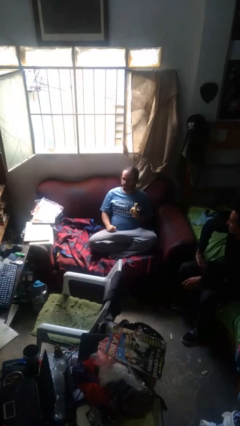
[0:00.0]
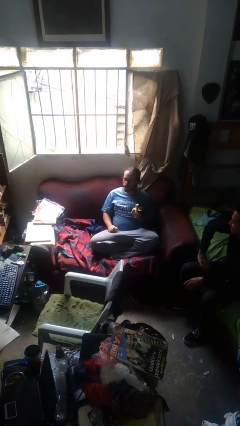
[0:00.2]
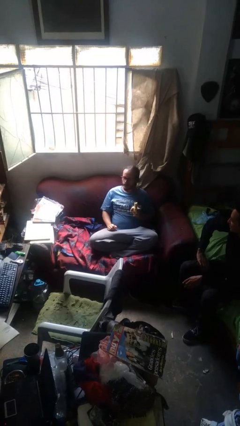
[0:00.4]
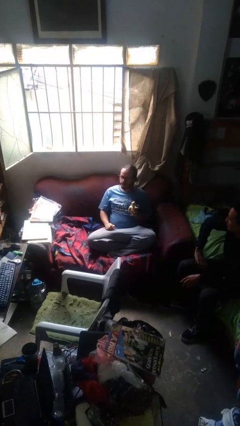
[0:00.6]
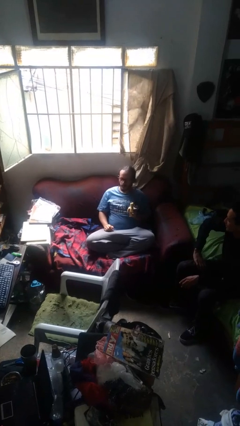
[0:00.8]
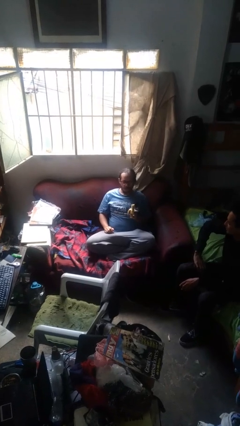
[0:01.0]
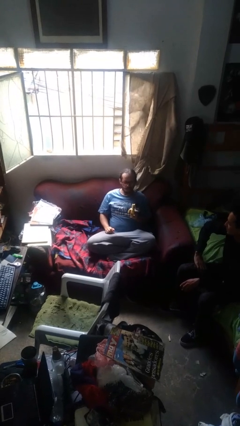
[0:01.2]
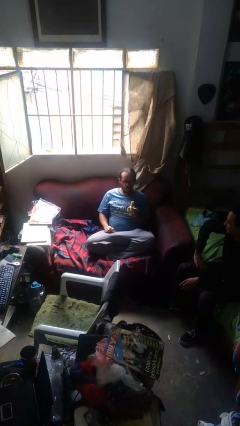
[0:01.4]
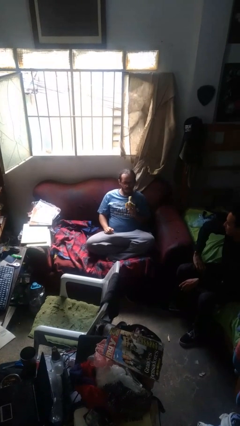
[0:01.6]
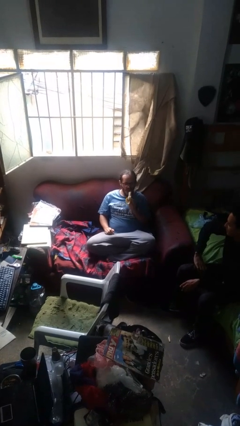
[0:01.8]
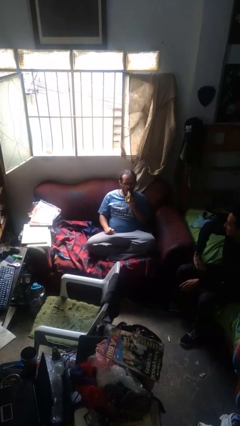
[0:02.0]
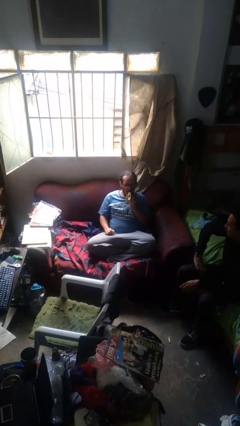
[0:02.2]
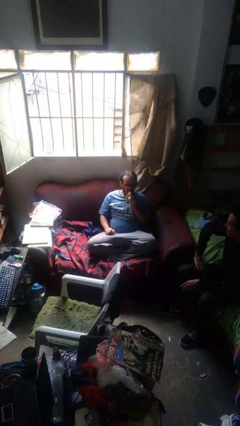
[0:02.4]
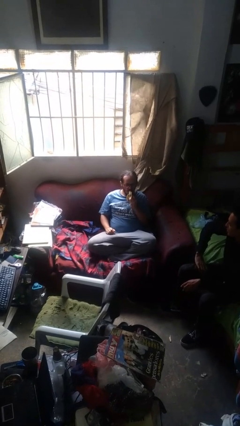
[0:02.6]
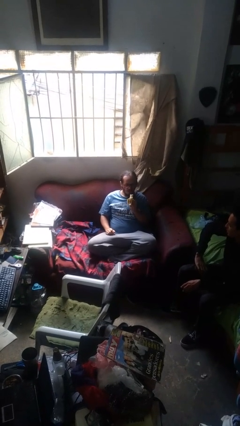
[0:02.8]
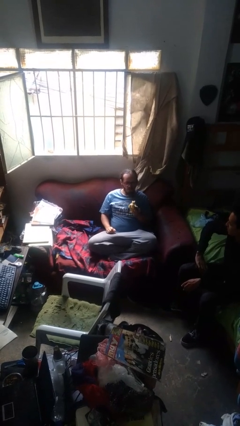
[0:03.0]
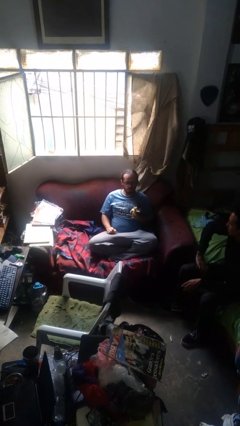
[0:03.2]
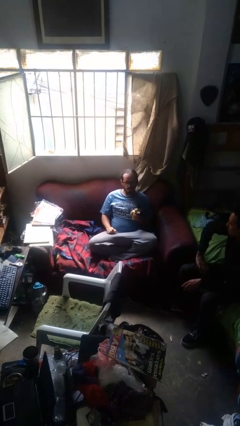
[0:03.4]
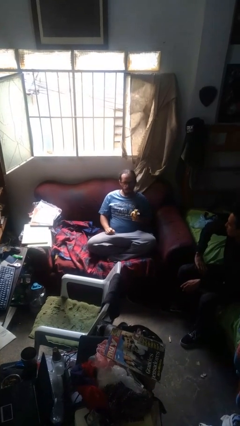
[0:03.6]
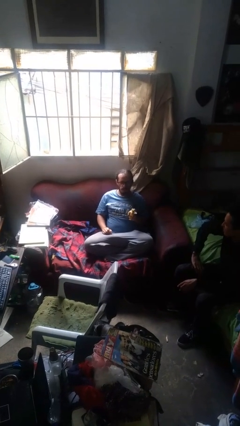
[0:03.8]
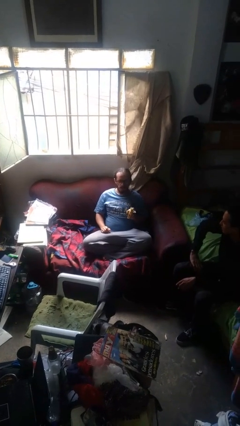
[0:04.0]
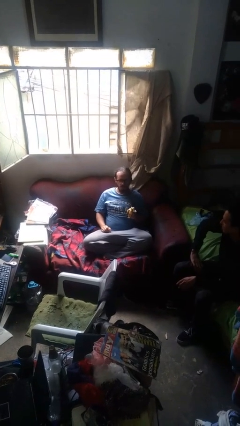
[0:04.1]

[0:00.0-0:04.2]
person eats banana

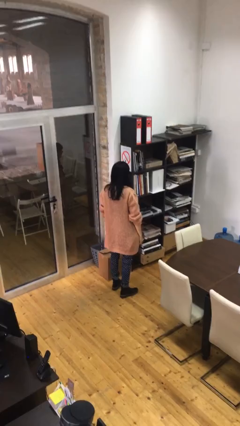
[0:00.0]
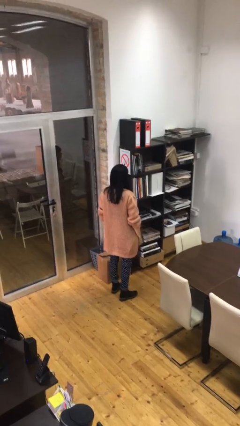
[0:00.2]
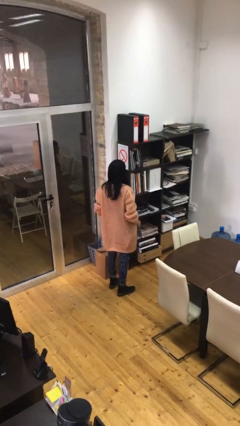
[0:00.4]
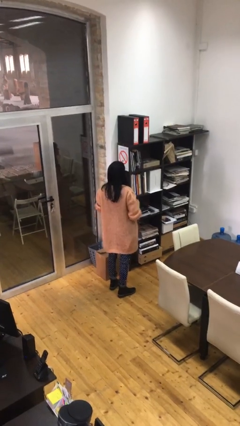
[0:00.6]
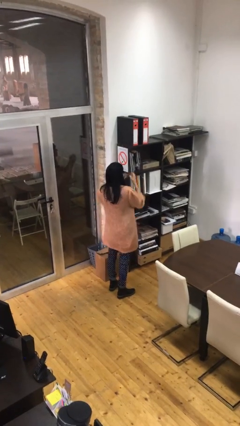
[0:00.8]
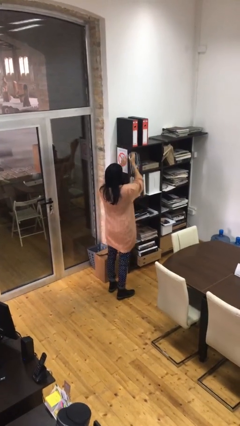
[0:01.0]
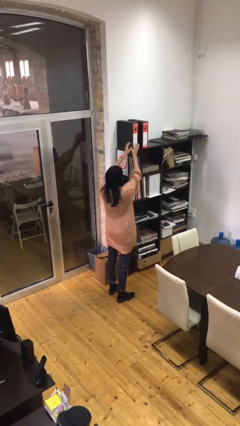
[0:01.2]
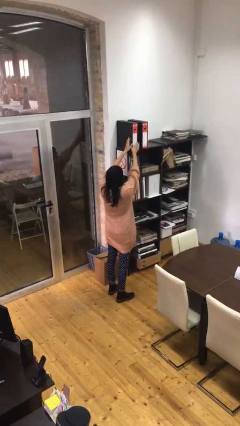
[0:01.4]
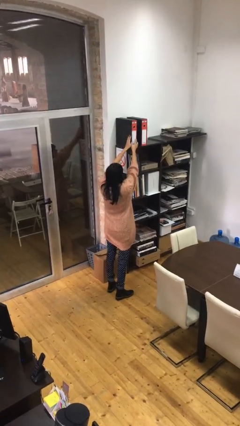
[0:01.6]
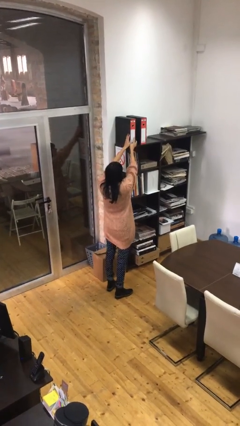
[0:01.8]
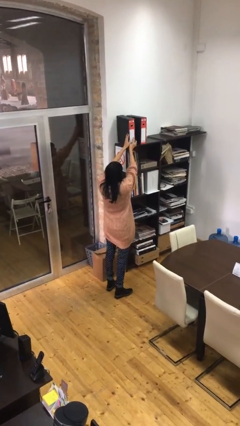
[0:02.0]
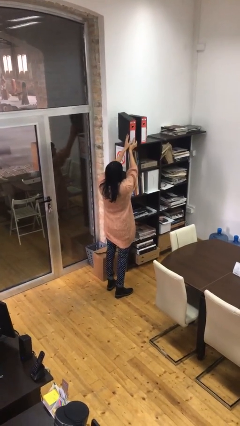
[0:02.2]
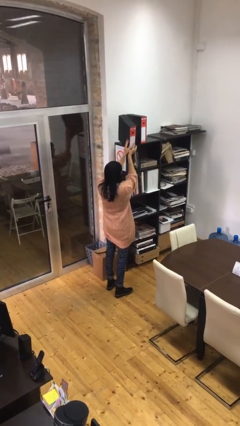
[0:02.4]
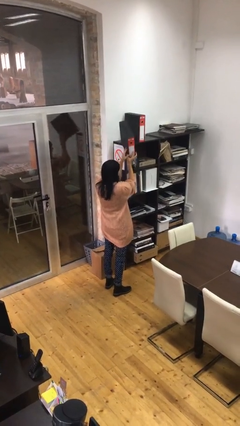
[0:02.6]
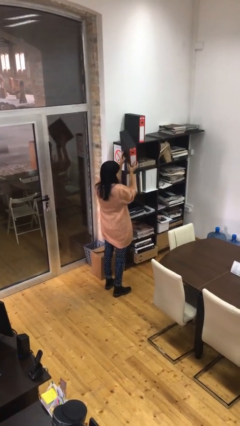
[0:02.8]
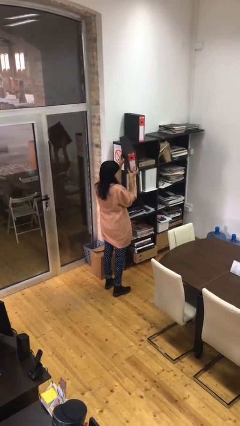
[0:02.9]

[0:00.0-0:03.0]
person picks up object from shelf

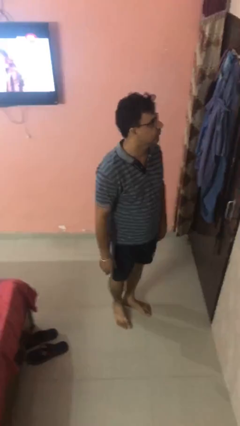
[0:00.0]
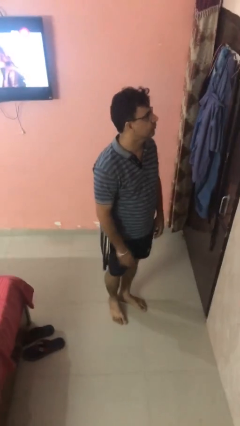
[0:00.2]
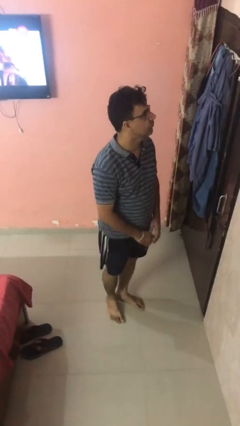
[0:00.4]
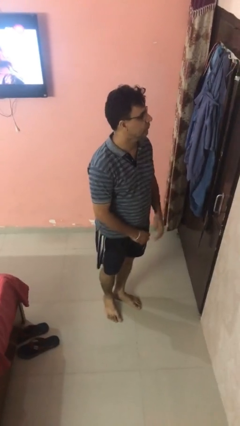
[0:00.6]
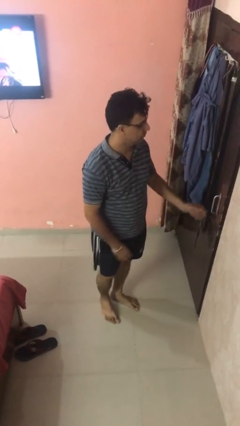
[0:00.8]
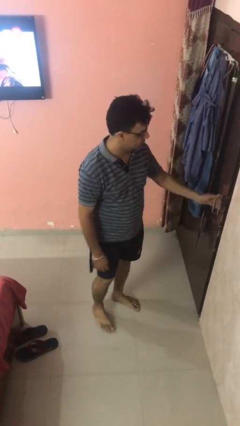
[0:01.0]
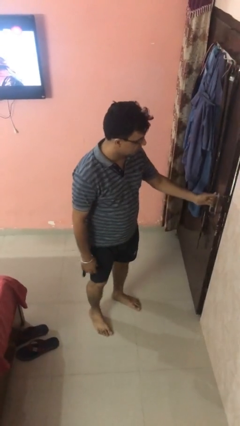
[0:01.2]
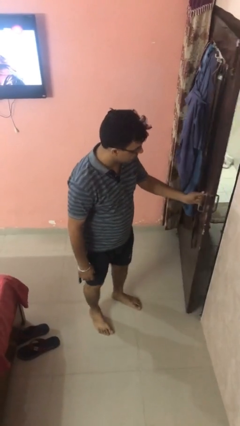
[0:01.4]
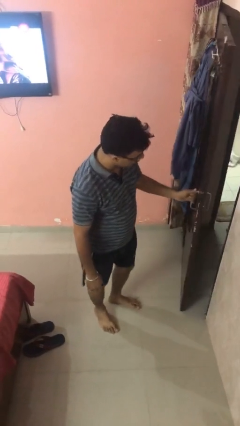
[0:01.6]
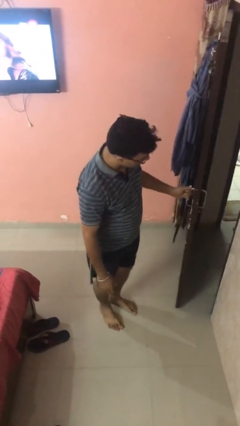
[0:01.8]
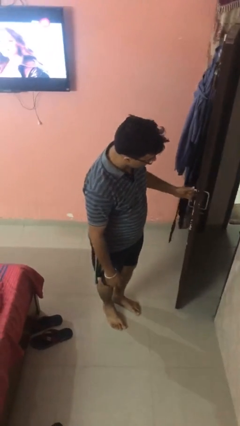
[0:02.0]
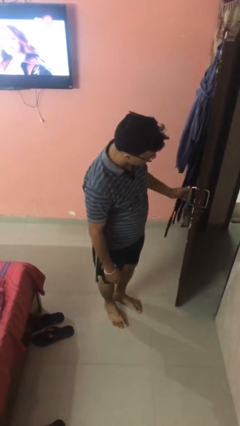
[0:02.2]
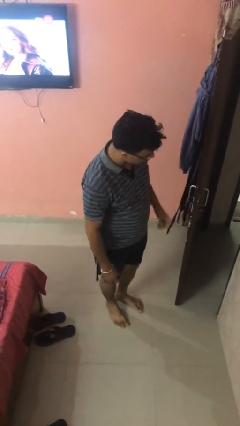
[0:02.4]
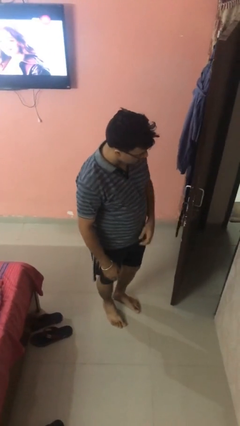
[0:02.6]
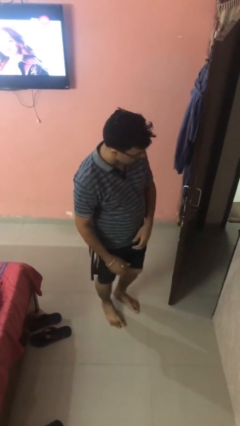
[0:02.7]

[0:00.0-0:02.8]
person opens facility door

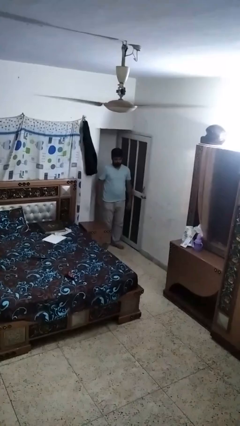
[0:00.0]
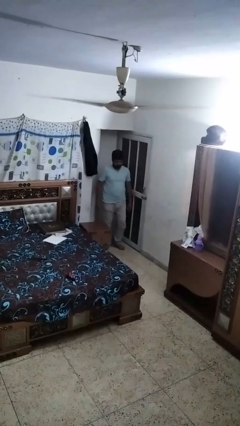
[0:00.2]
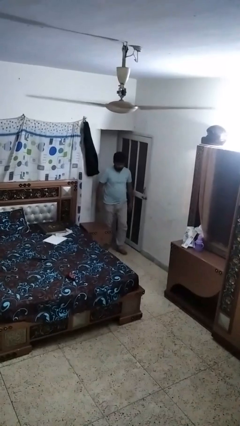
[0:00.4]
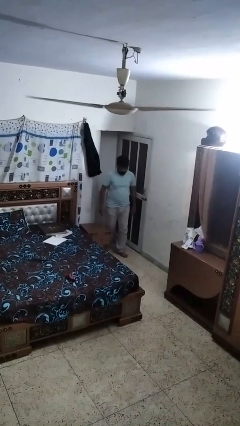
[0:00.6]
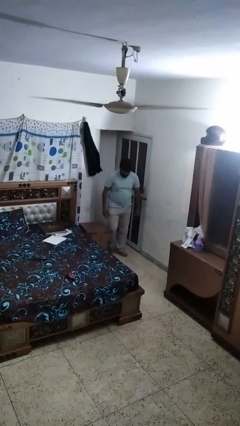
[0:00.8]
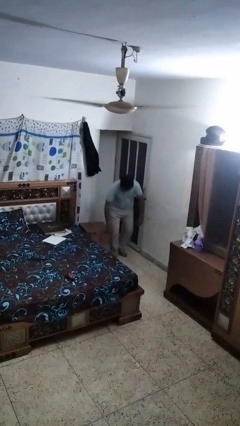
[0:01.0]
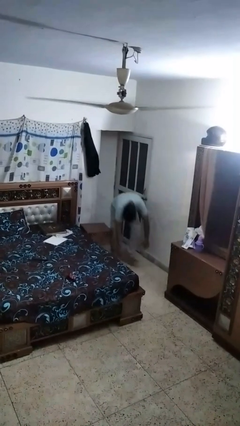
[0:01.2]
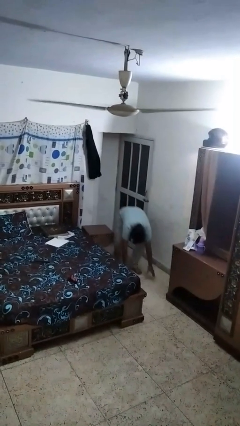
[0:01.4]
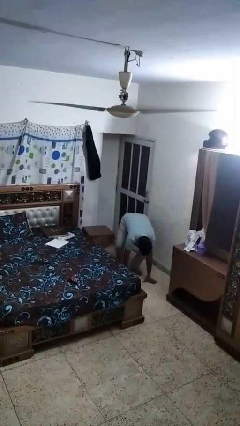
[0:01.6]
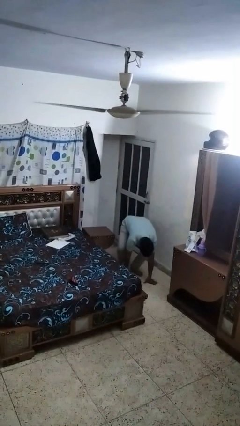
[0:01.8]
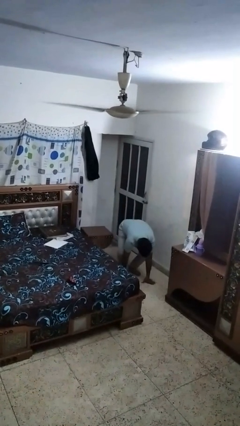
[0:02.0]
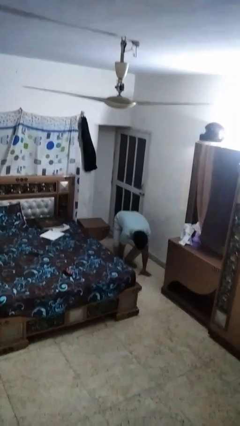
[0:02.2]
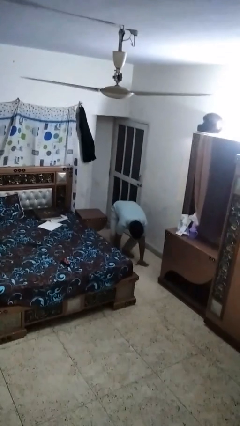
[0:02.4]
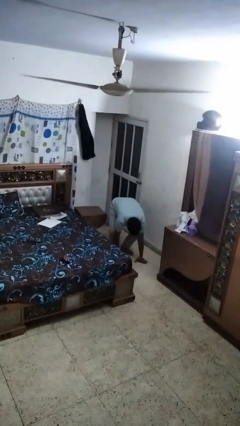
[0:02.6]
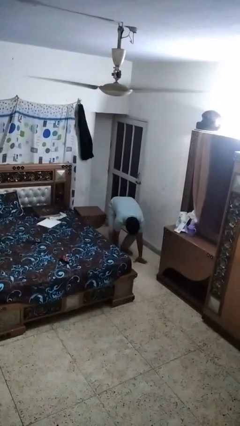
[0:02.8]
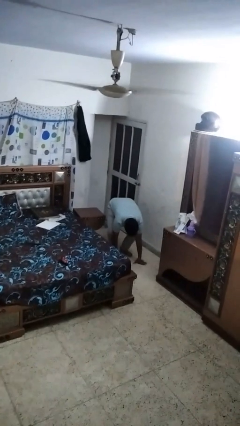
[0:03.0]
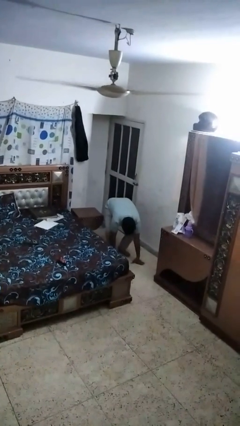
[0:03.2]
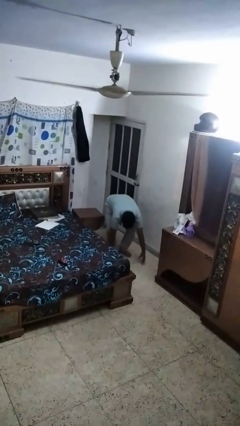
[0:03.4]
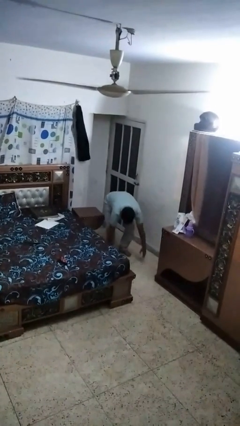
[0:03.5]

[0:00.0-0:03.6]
person trips on object on floor

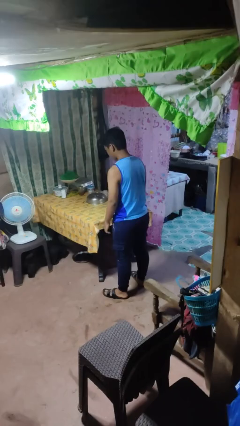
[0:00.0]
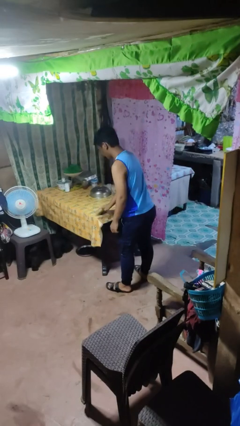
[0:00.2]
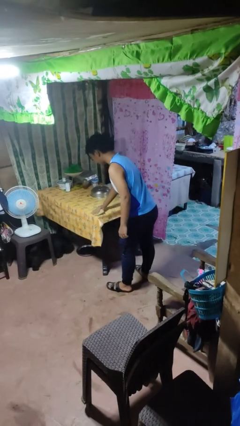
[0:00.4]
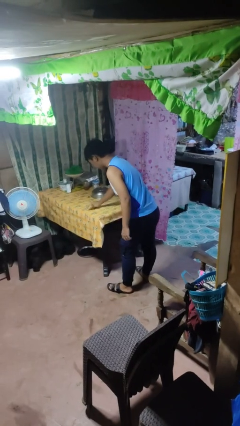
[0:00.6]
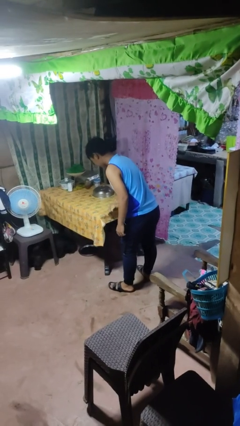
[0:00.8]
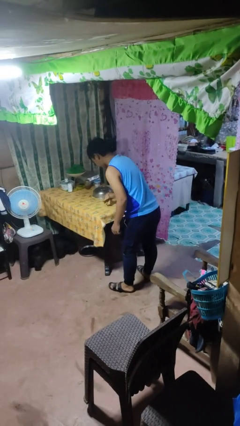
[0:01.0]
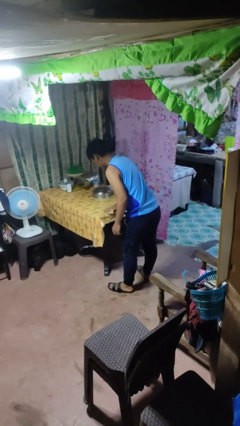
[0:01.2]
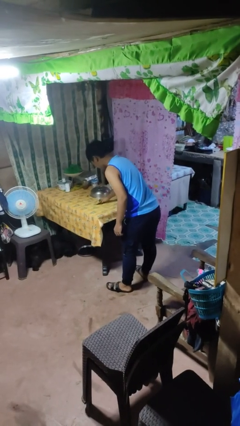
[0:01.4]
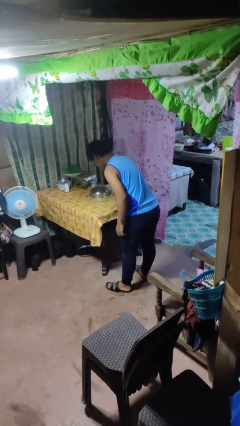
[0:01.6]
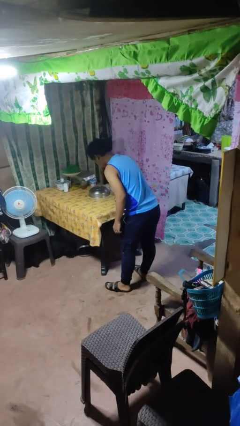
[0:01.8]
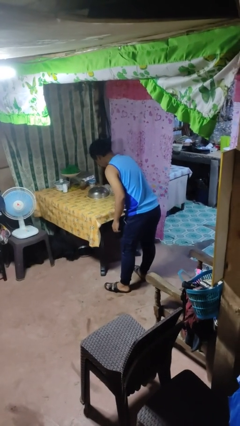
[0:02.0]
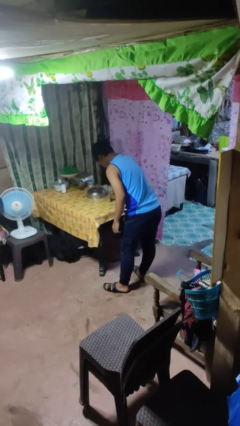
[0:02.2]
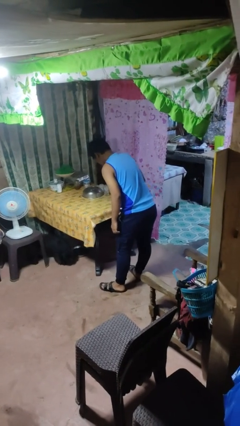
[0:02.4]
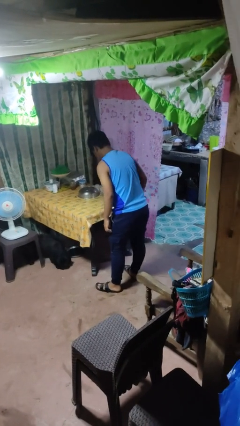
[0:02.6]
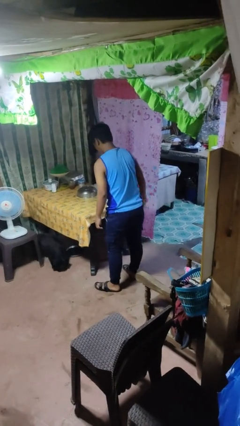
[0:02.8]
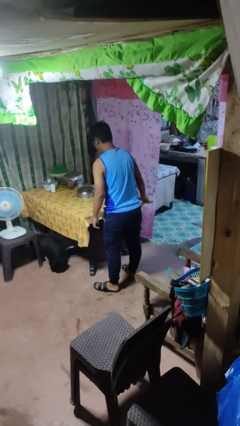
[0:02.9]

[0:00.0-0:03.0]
person cleans table with rag

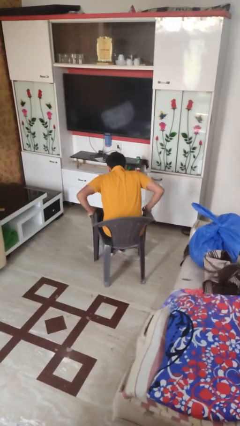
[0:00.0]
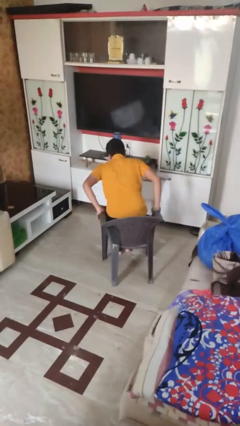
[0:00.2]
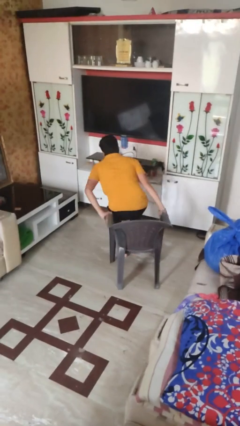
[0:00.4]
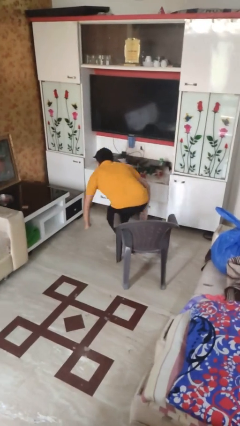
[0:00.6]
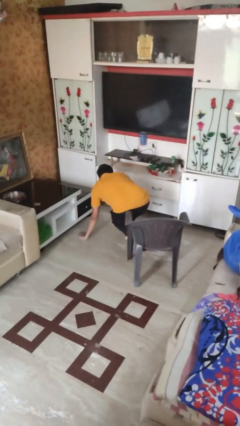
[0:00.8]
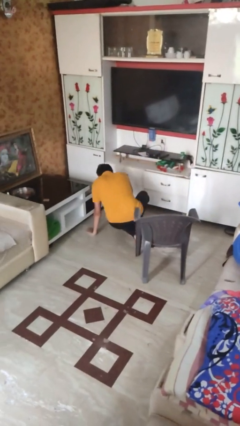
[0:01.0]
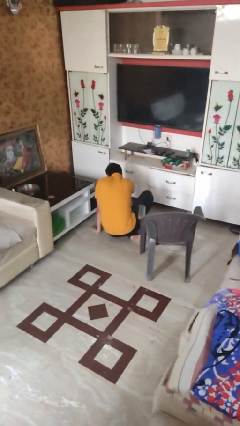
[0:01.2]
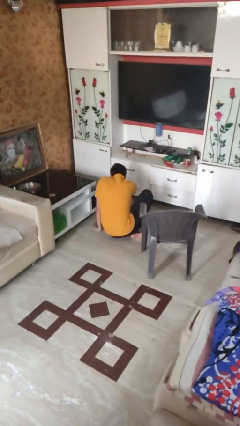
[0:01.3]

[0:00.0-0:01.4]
person falls from chair
